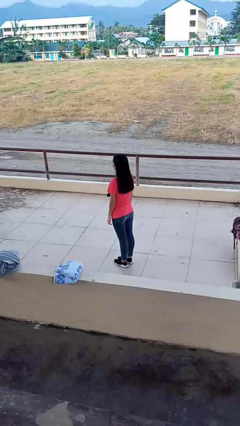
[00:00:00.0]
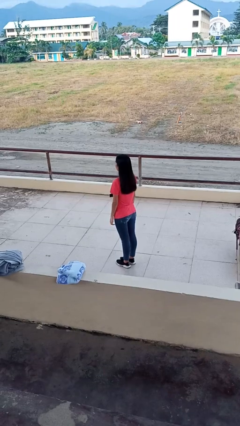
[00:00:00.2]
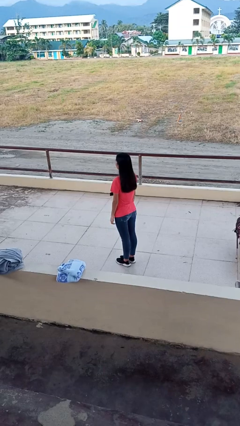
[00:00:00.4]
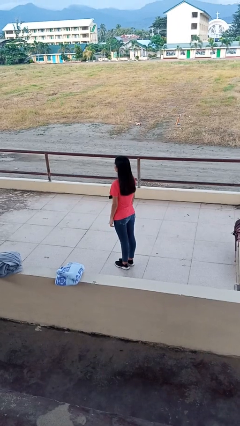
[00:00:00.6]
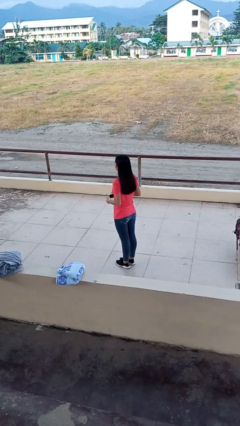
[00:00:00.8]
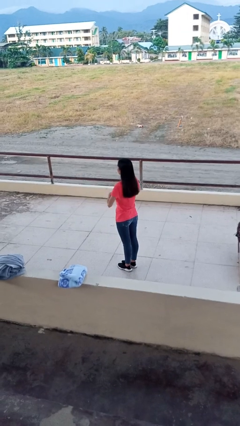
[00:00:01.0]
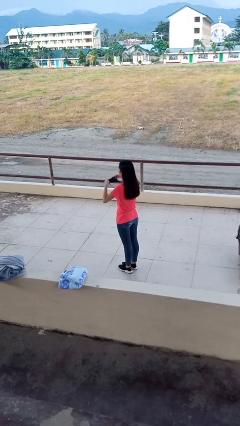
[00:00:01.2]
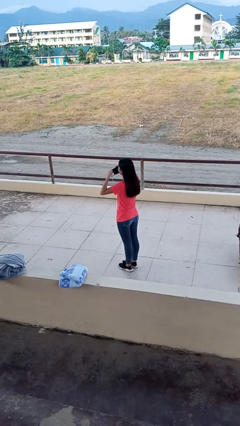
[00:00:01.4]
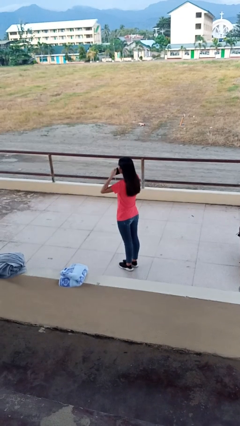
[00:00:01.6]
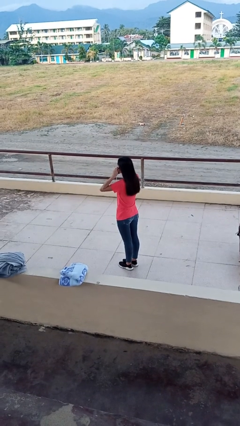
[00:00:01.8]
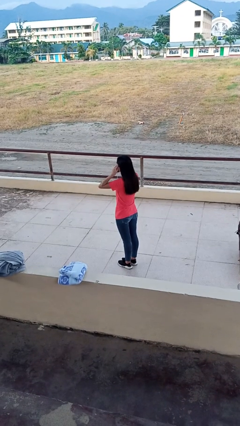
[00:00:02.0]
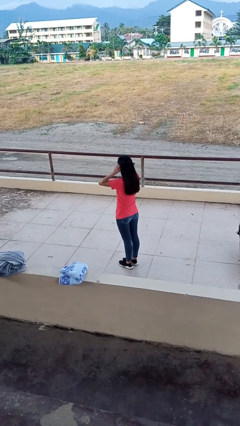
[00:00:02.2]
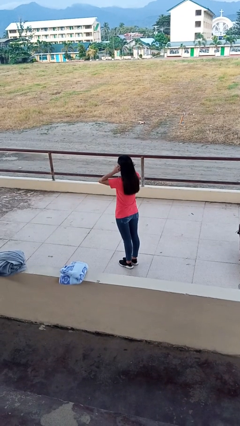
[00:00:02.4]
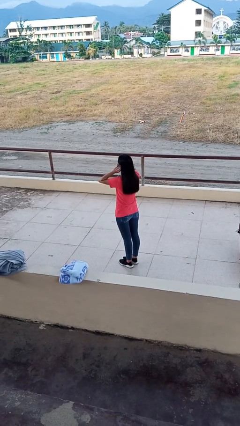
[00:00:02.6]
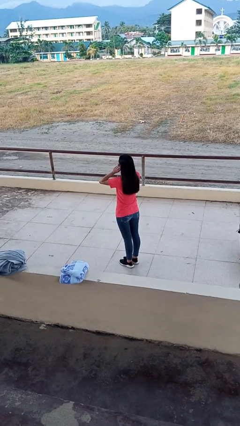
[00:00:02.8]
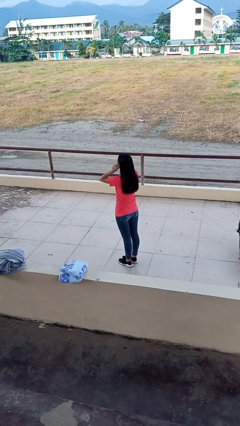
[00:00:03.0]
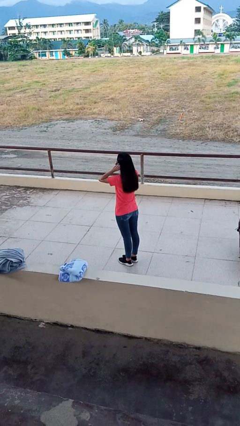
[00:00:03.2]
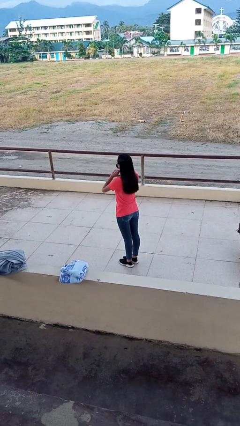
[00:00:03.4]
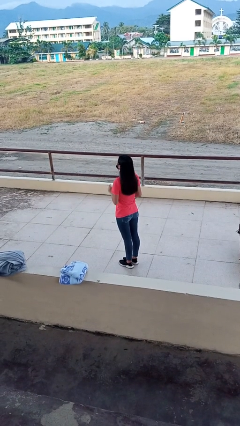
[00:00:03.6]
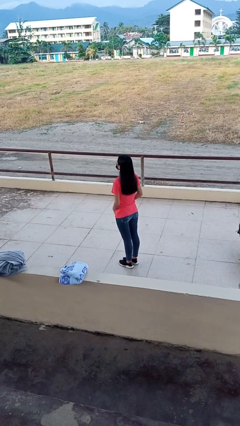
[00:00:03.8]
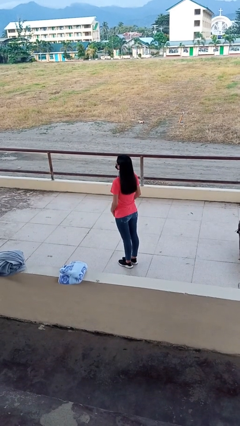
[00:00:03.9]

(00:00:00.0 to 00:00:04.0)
person puts on facemask

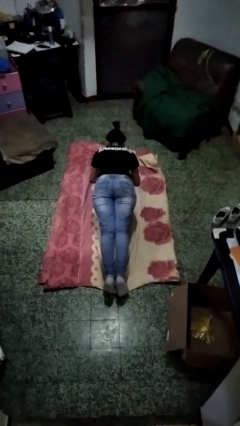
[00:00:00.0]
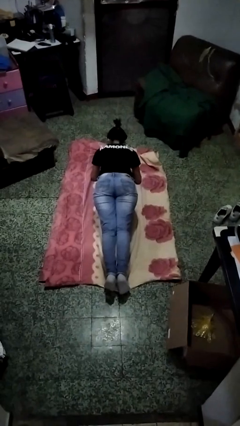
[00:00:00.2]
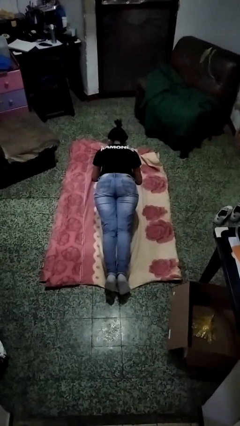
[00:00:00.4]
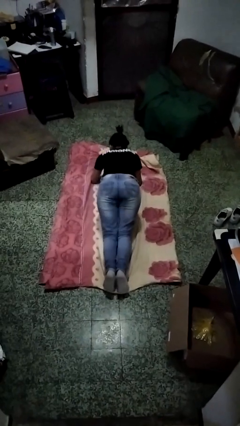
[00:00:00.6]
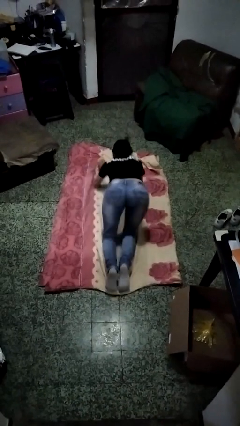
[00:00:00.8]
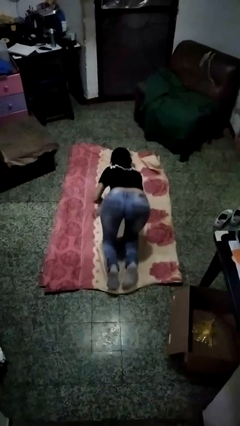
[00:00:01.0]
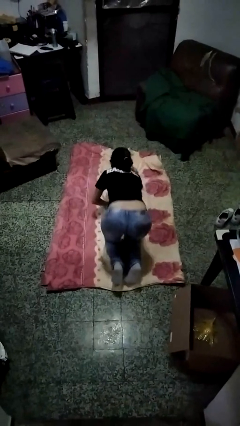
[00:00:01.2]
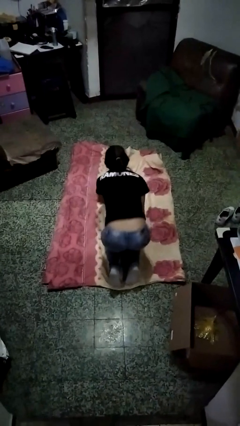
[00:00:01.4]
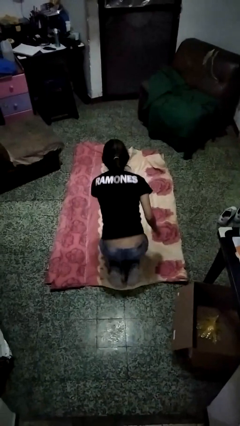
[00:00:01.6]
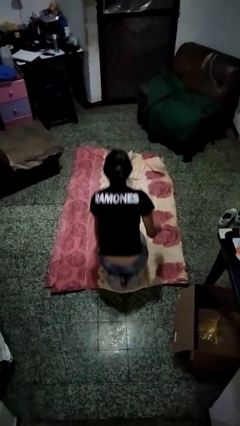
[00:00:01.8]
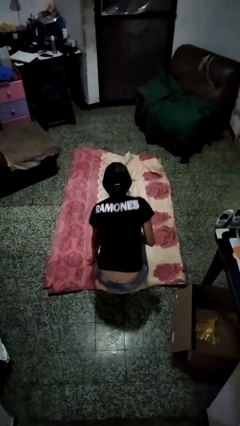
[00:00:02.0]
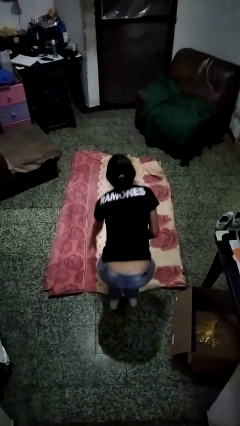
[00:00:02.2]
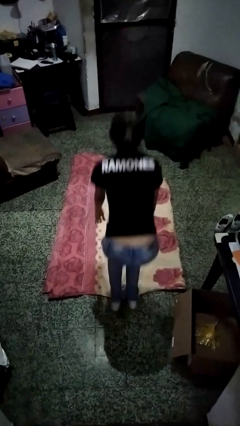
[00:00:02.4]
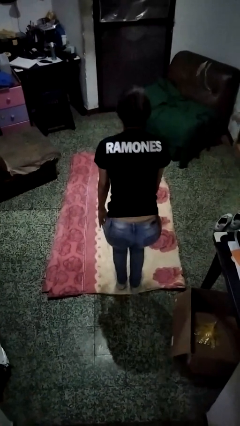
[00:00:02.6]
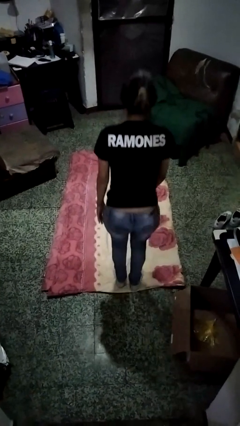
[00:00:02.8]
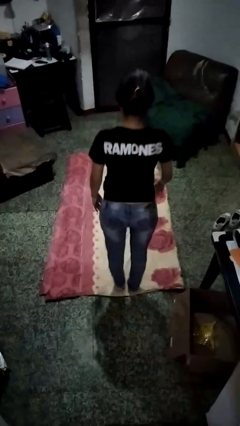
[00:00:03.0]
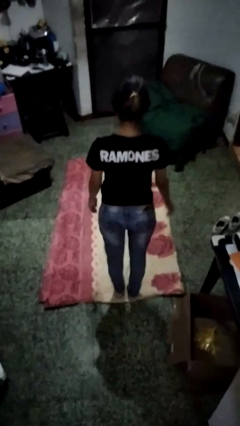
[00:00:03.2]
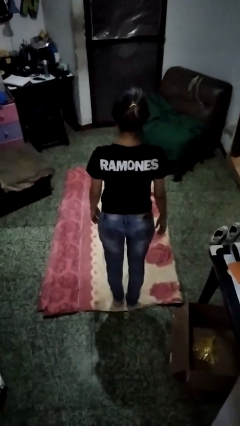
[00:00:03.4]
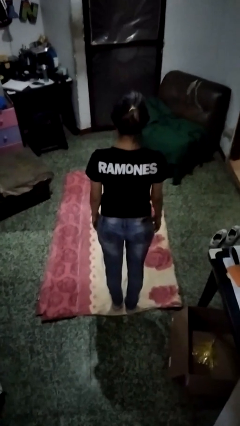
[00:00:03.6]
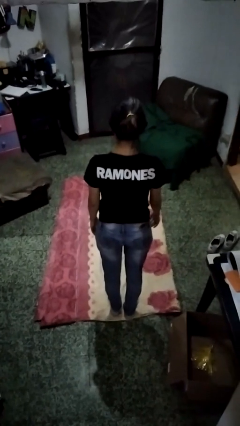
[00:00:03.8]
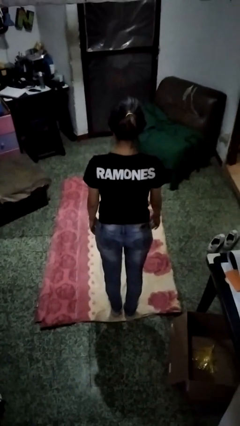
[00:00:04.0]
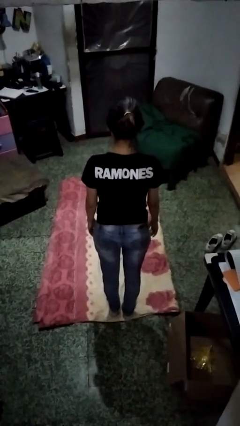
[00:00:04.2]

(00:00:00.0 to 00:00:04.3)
person stands up from floor

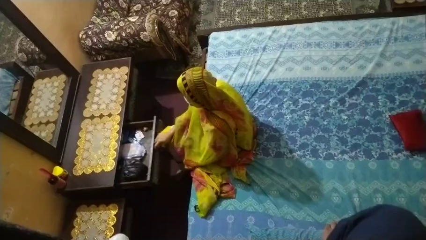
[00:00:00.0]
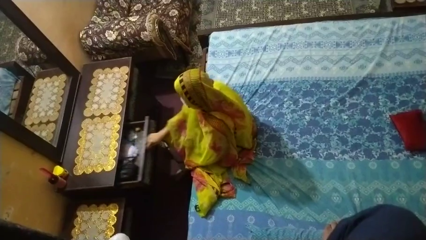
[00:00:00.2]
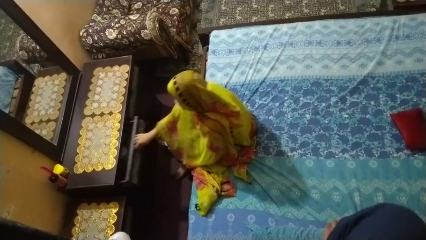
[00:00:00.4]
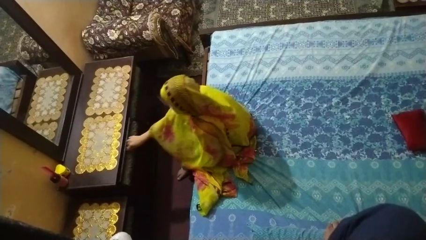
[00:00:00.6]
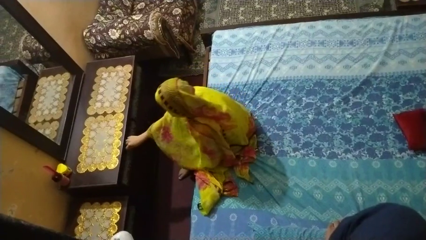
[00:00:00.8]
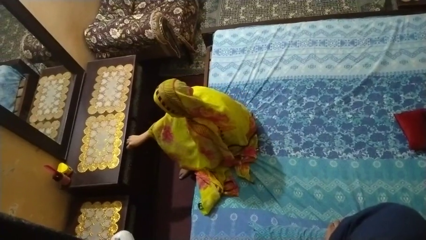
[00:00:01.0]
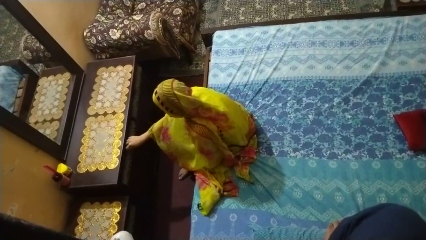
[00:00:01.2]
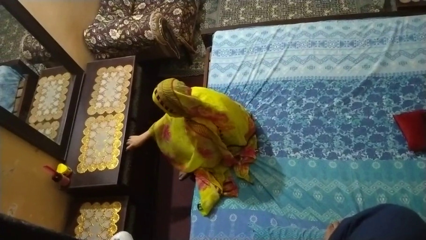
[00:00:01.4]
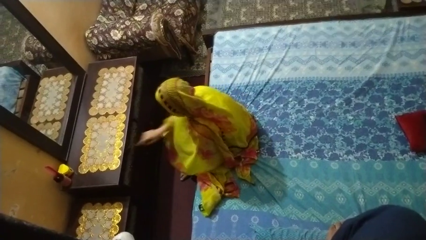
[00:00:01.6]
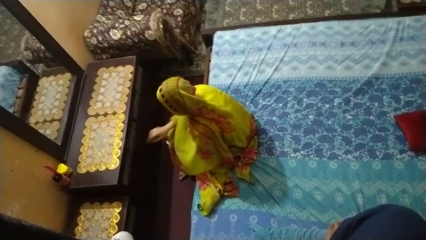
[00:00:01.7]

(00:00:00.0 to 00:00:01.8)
person closes dresser drawer

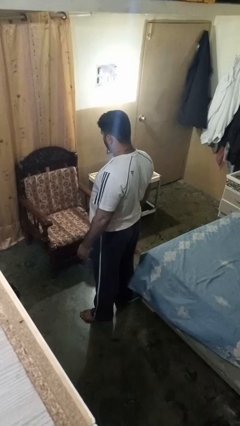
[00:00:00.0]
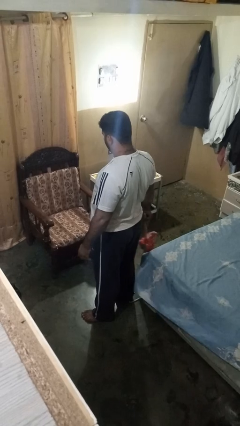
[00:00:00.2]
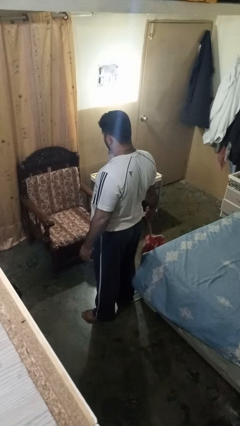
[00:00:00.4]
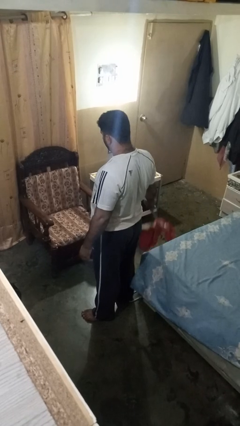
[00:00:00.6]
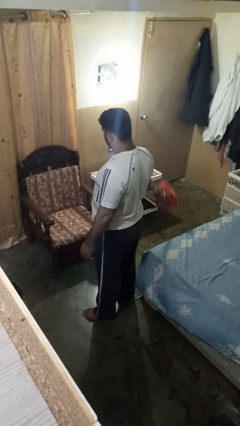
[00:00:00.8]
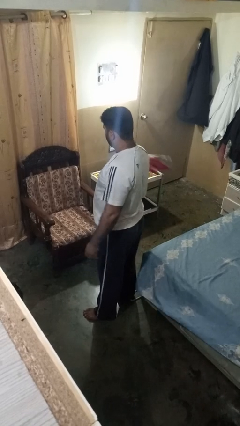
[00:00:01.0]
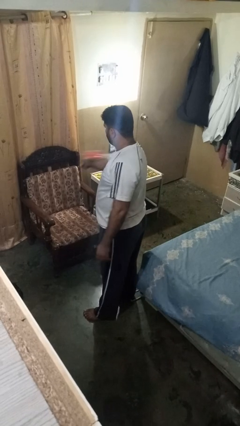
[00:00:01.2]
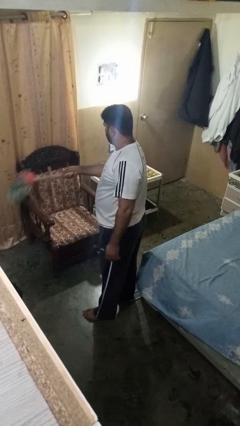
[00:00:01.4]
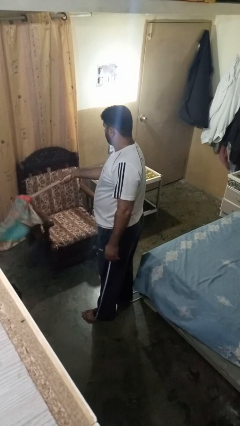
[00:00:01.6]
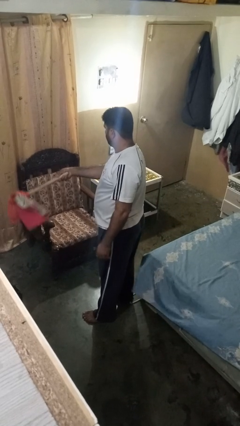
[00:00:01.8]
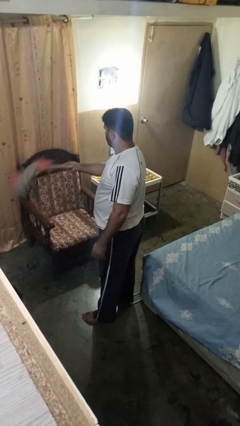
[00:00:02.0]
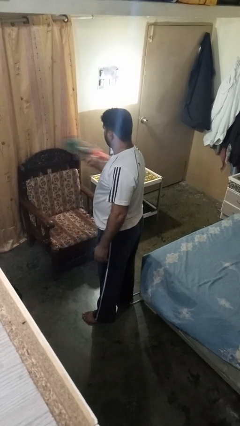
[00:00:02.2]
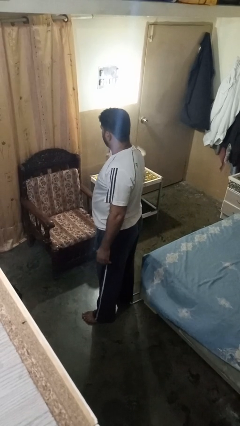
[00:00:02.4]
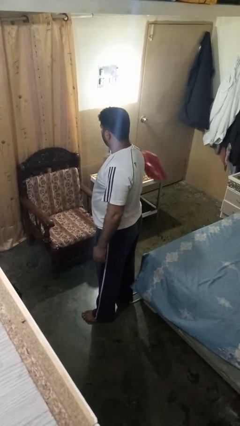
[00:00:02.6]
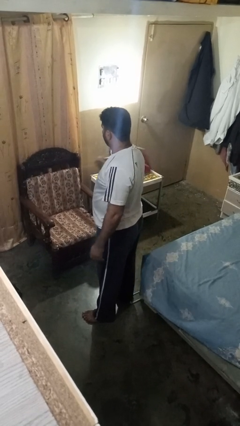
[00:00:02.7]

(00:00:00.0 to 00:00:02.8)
person dusts furniture

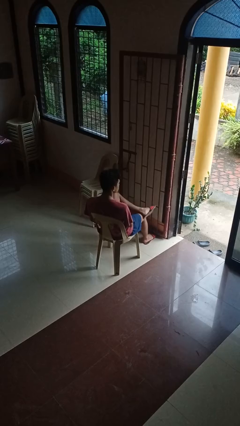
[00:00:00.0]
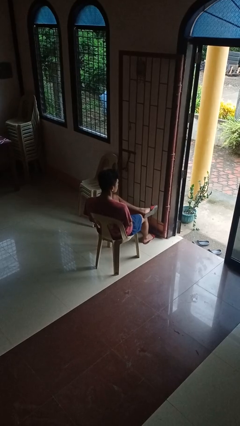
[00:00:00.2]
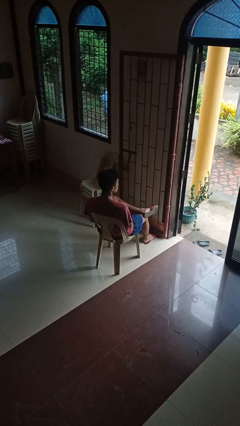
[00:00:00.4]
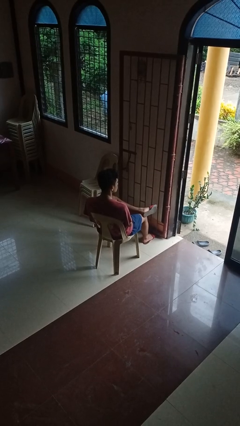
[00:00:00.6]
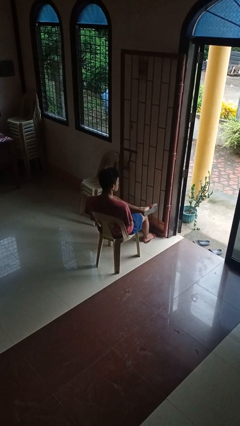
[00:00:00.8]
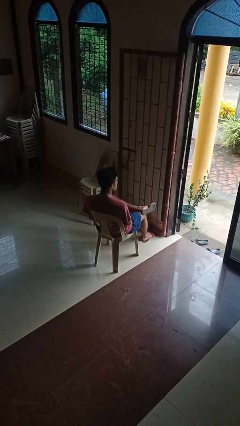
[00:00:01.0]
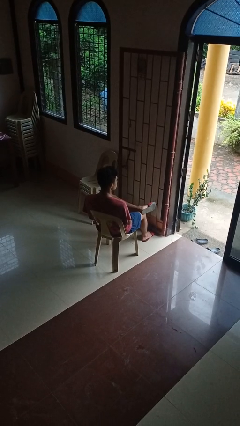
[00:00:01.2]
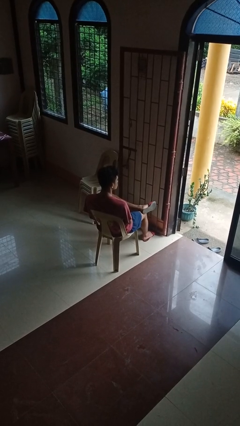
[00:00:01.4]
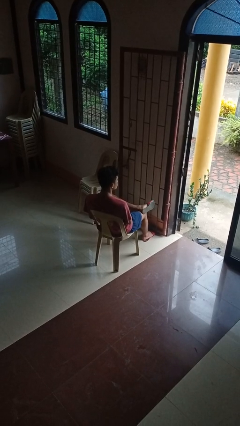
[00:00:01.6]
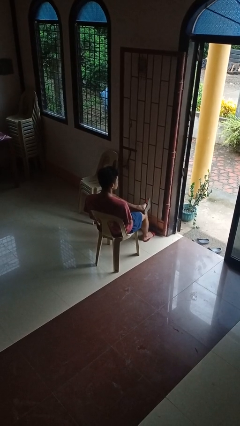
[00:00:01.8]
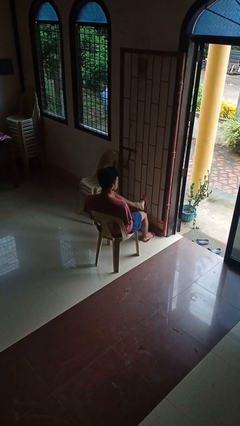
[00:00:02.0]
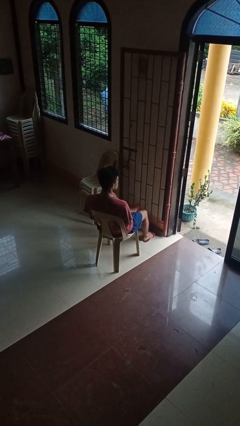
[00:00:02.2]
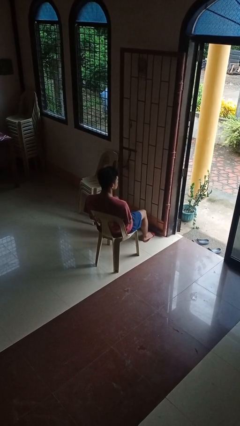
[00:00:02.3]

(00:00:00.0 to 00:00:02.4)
person crosses legs

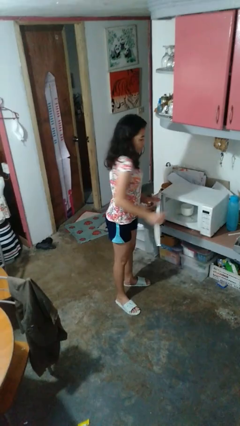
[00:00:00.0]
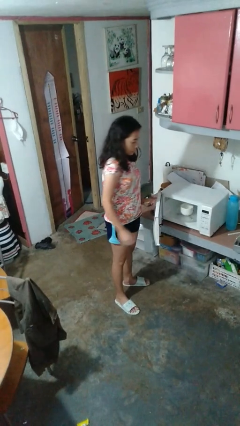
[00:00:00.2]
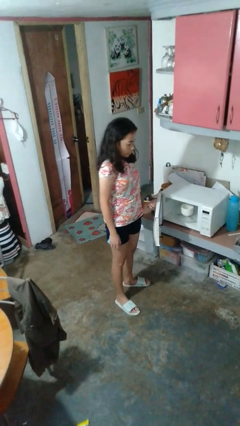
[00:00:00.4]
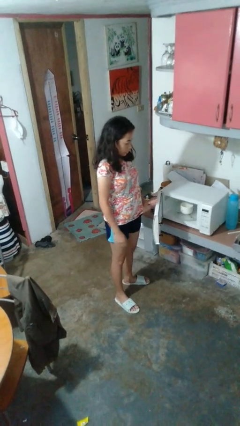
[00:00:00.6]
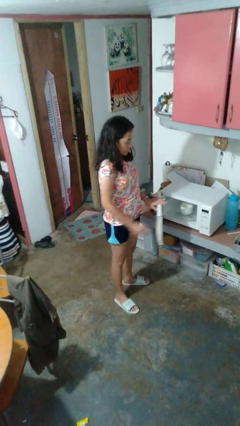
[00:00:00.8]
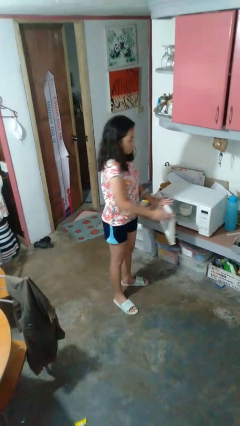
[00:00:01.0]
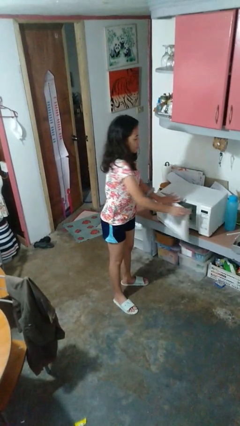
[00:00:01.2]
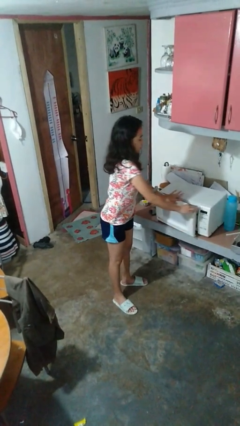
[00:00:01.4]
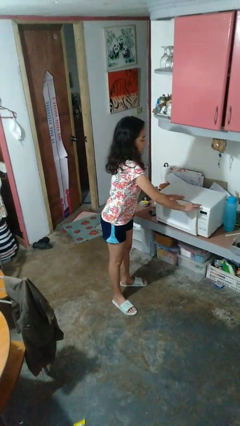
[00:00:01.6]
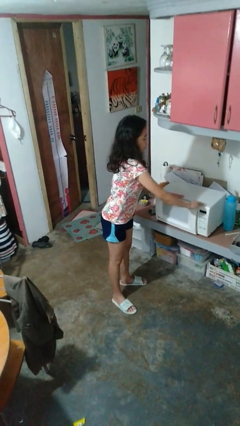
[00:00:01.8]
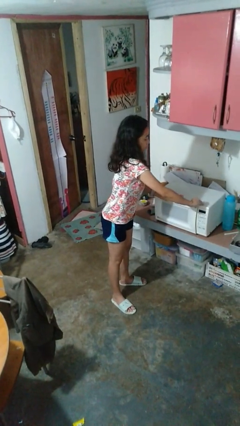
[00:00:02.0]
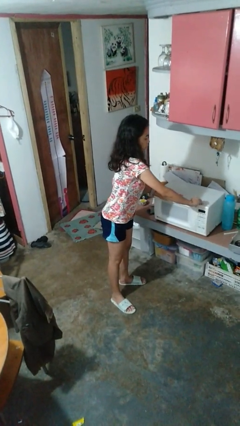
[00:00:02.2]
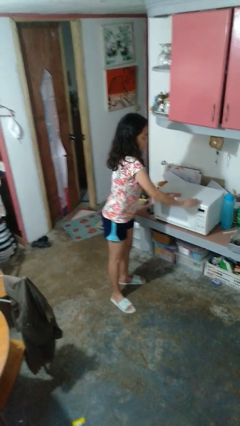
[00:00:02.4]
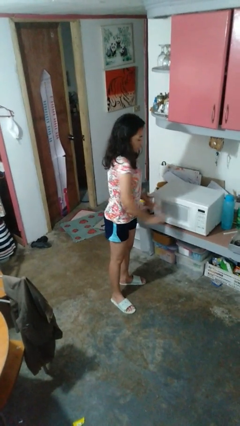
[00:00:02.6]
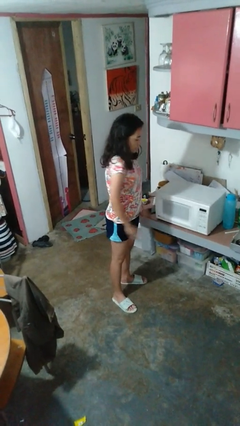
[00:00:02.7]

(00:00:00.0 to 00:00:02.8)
person closes microwave
